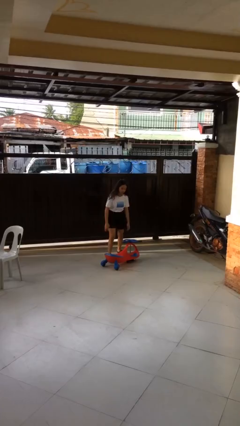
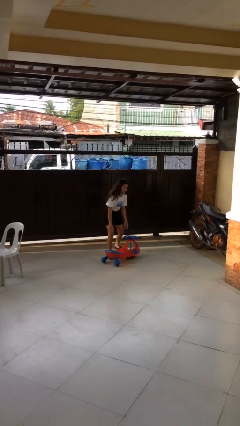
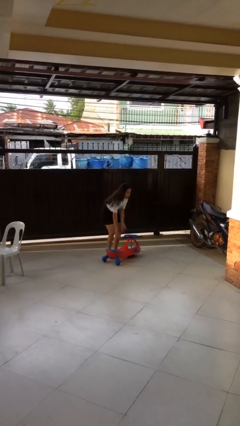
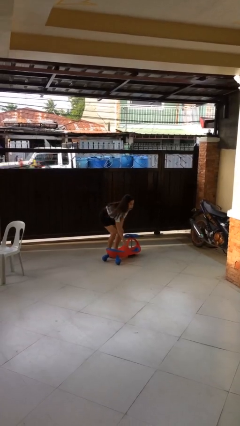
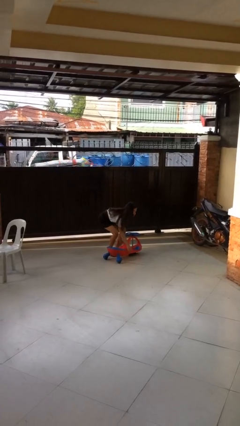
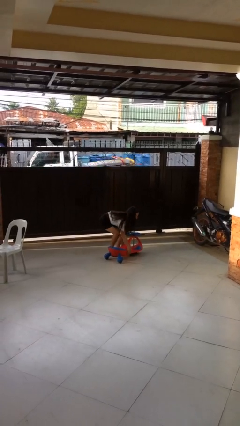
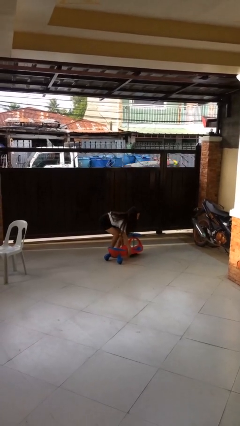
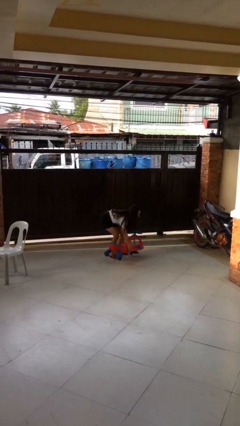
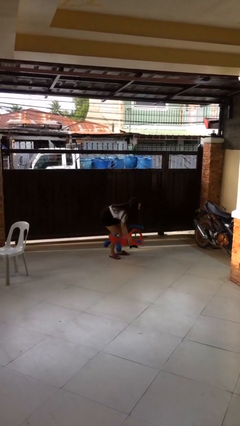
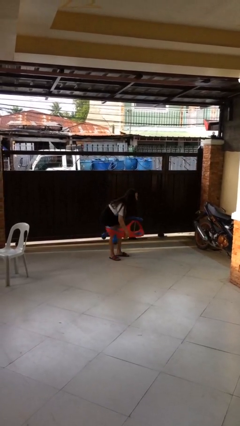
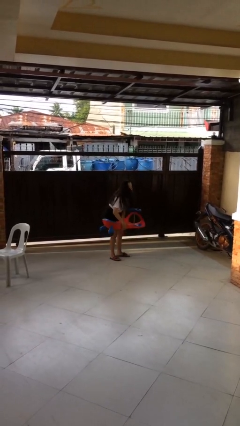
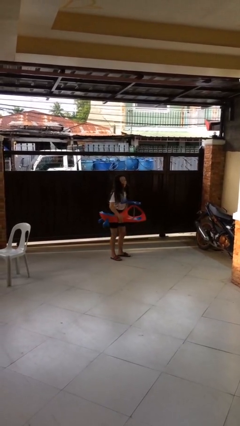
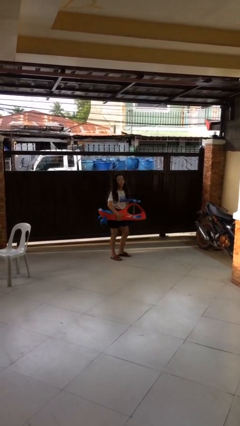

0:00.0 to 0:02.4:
person picks up object from floor

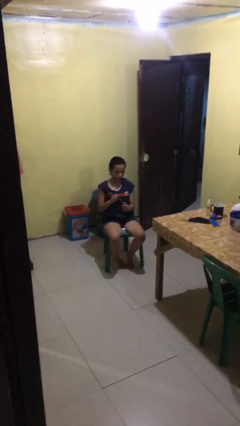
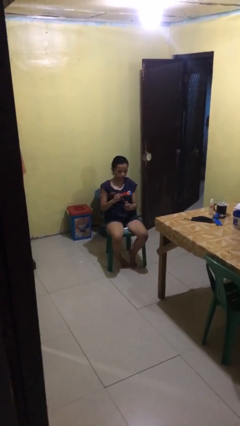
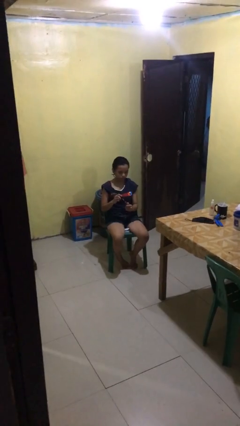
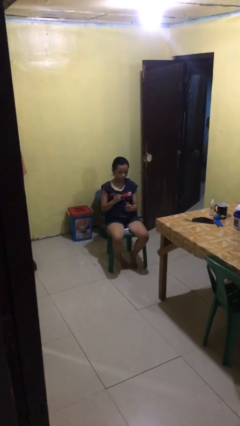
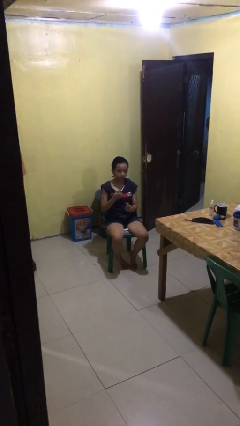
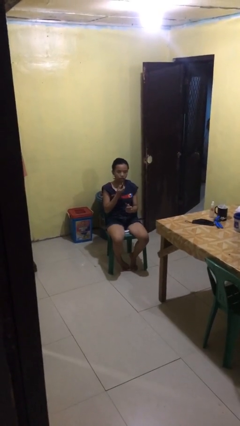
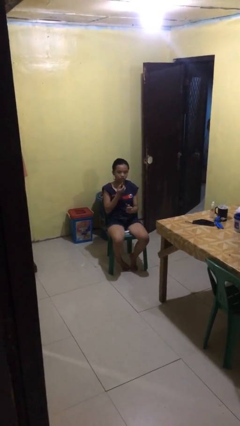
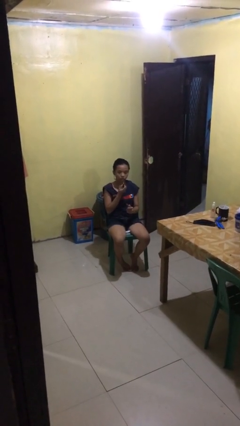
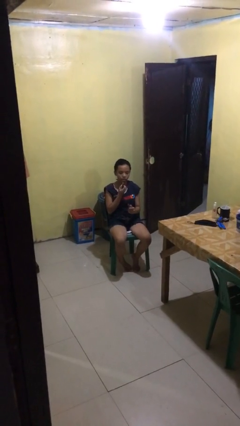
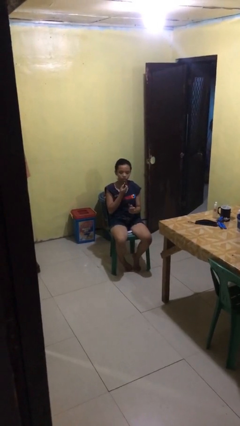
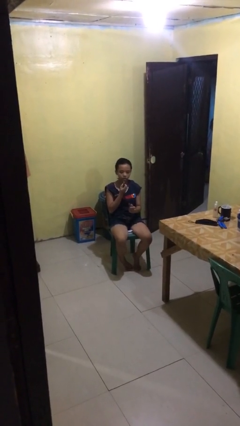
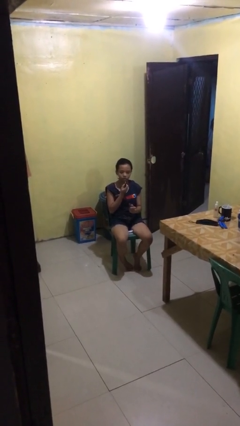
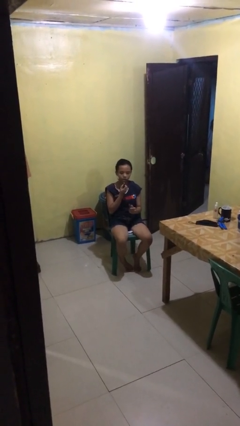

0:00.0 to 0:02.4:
person applies lip makeup

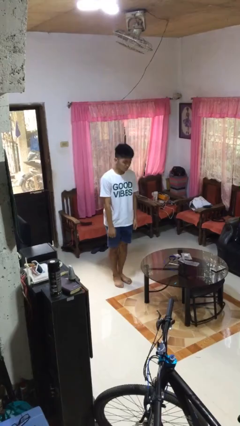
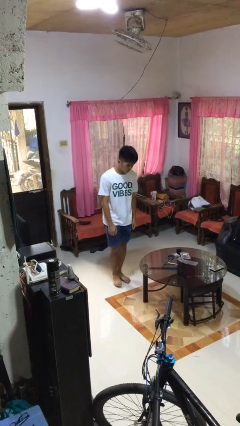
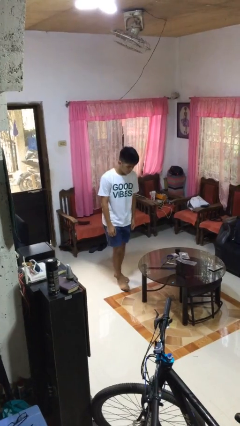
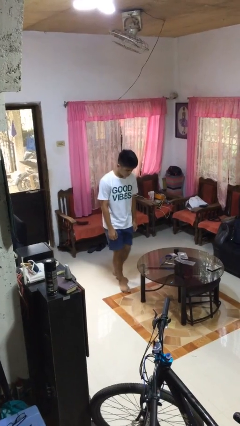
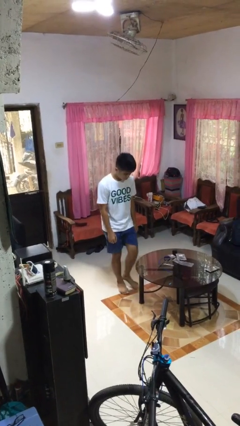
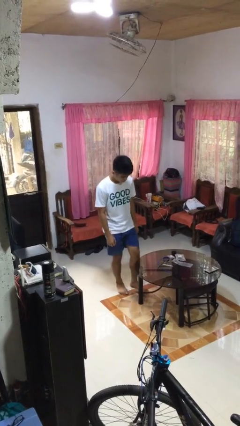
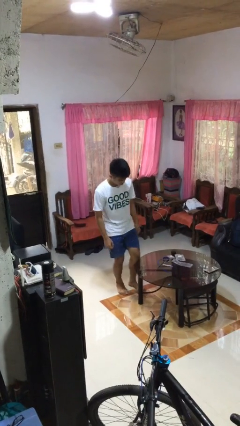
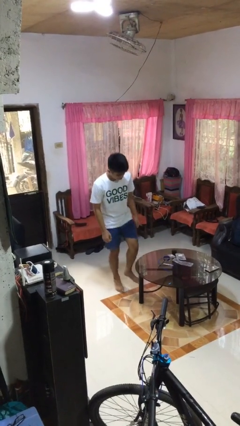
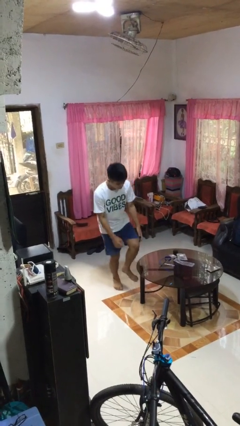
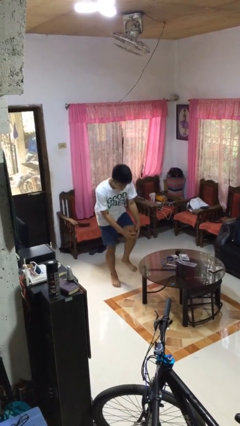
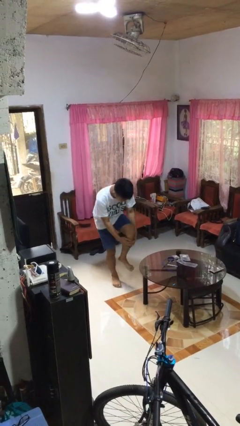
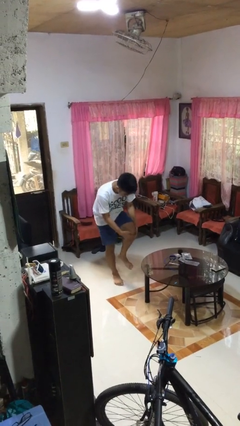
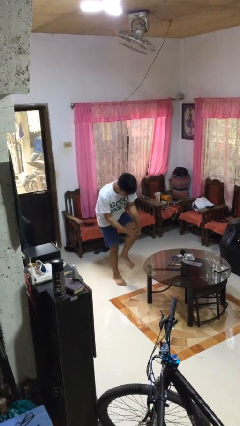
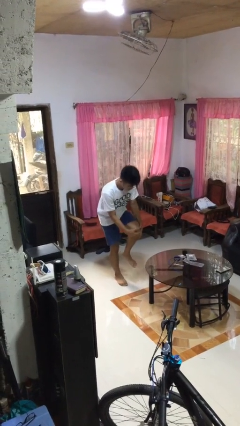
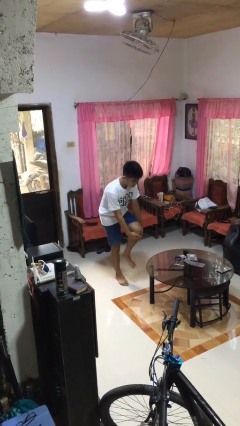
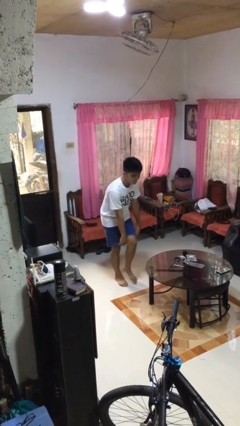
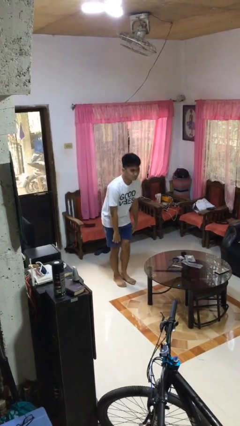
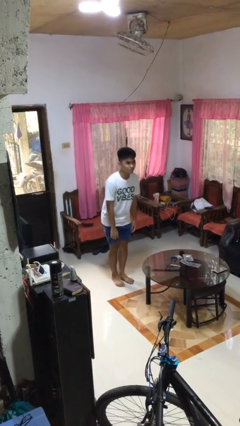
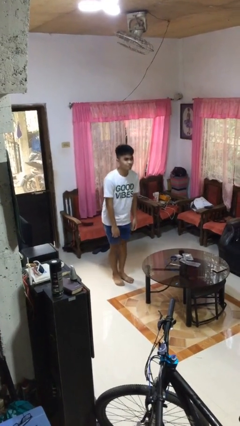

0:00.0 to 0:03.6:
person bumps into table

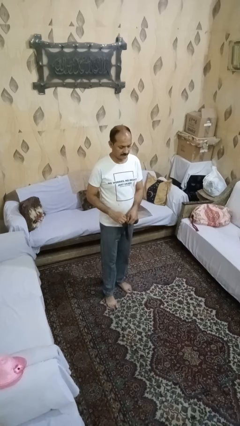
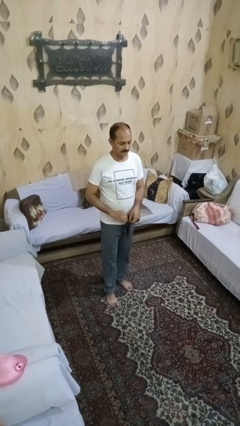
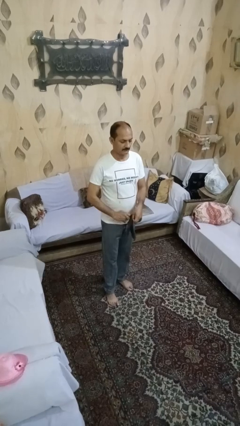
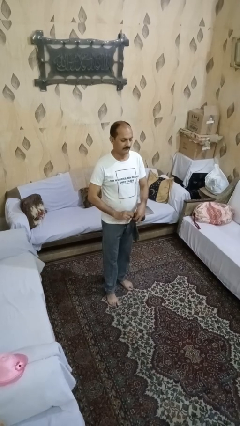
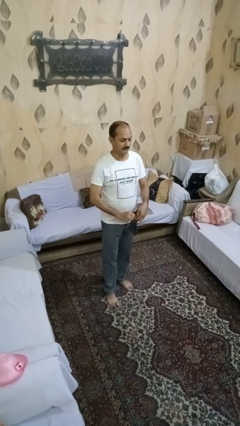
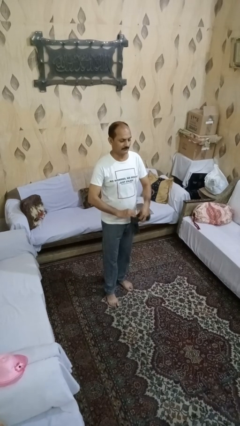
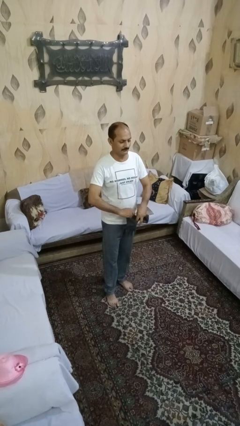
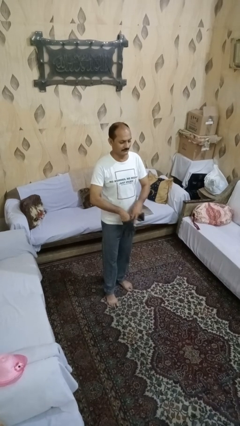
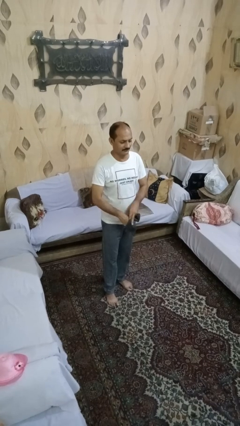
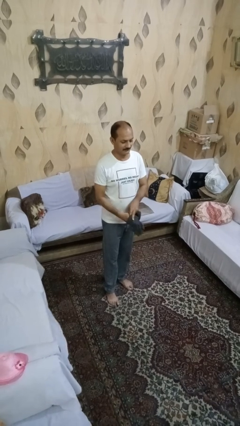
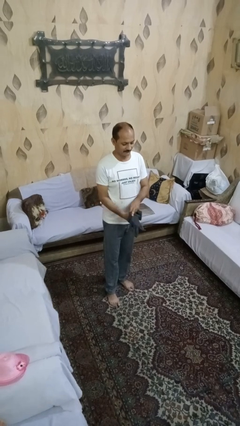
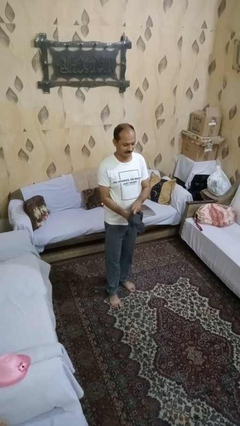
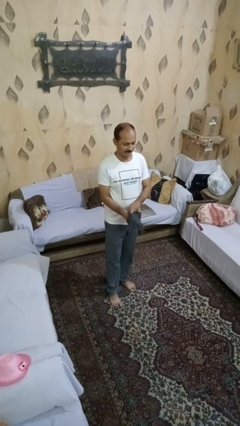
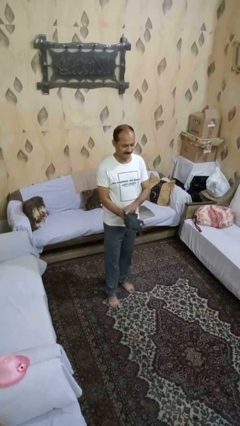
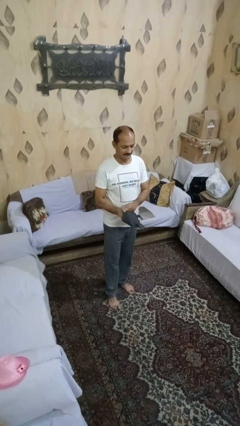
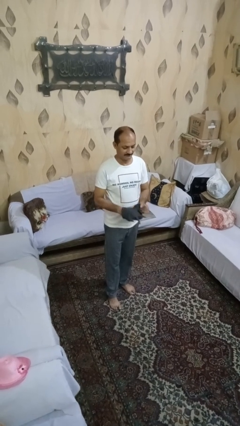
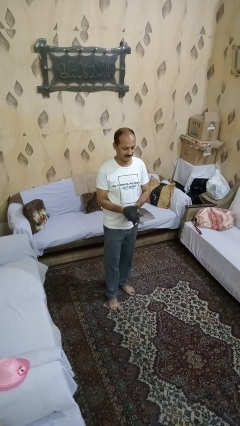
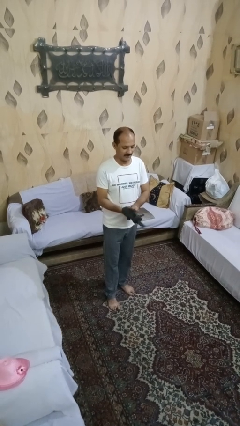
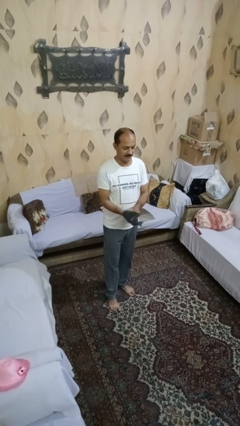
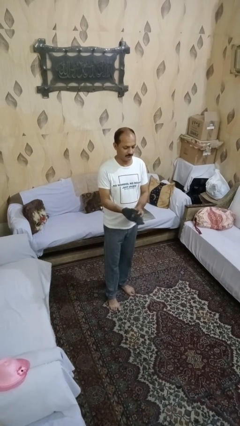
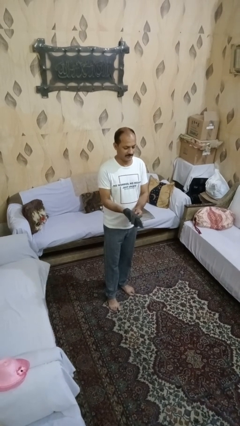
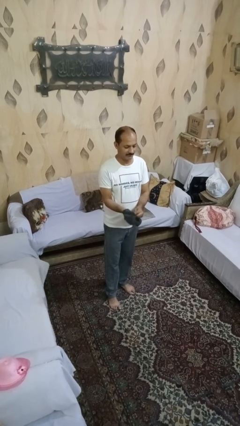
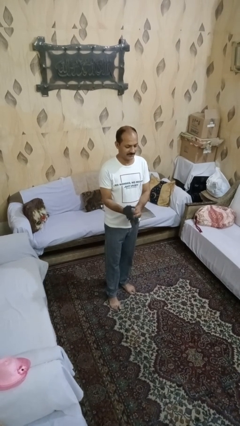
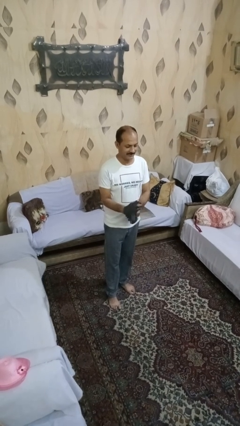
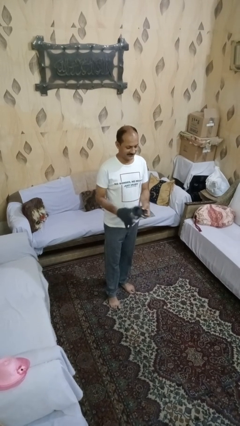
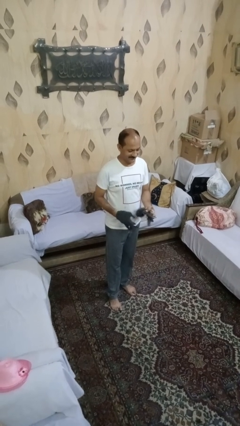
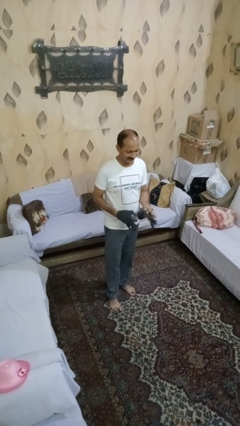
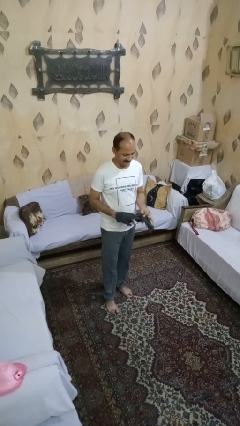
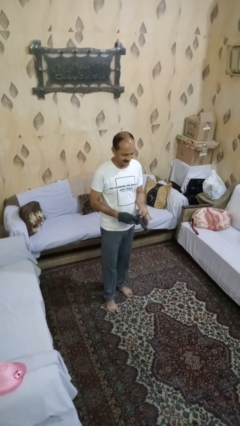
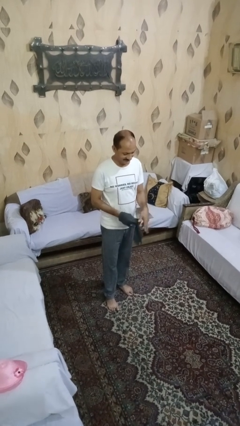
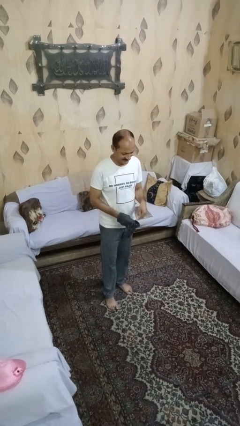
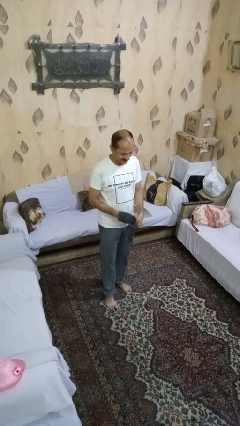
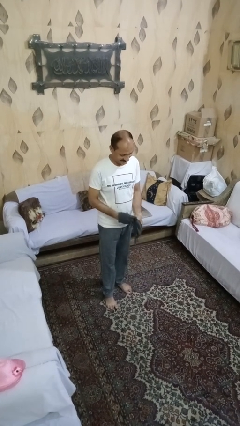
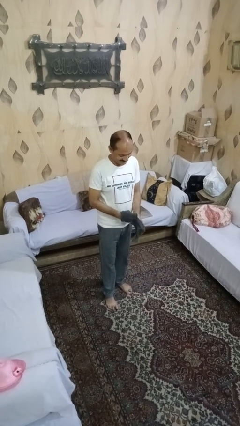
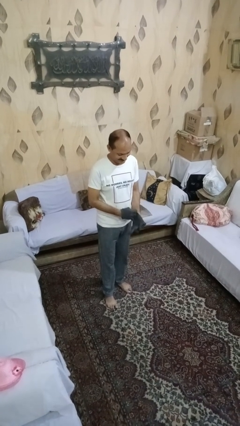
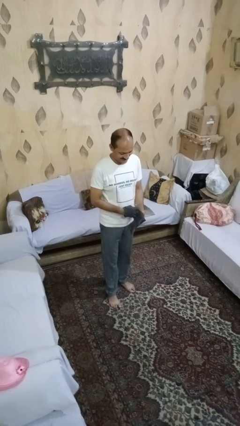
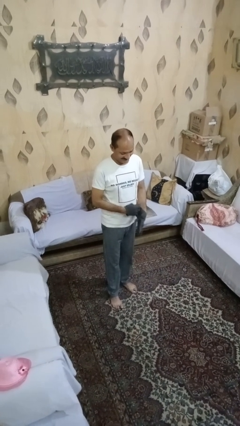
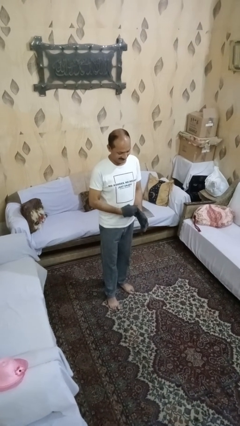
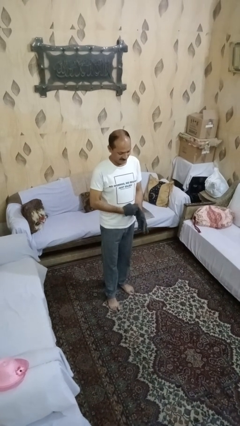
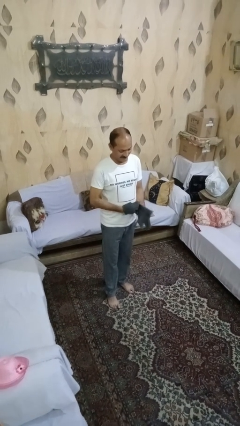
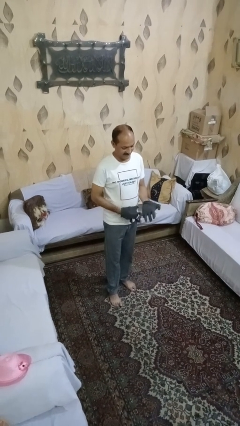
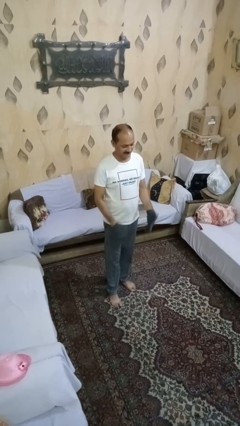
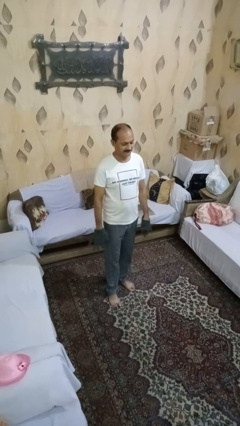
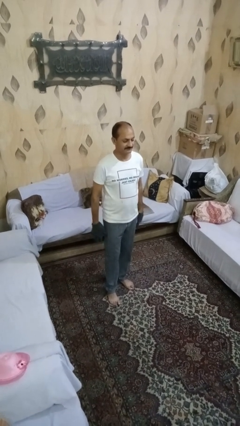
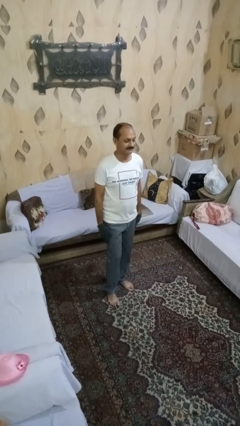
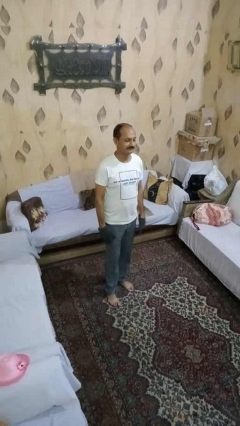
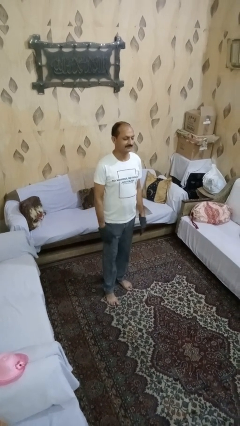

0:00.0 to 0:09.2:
person puts on gloves
